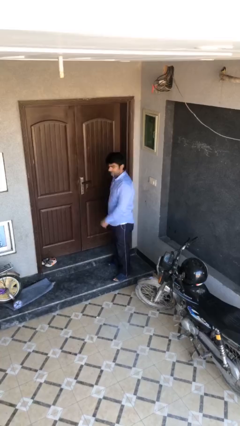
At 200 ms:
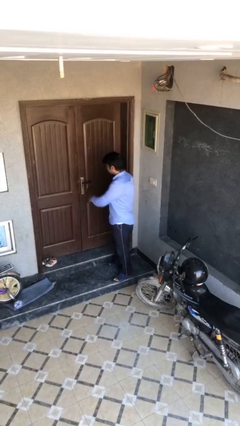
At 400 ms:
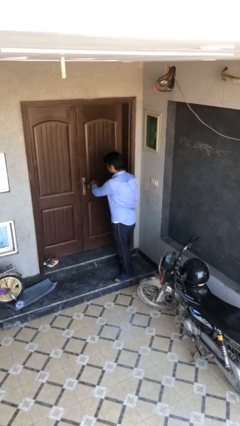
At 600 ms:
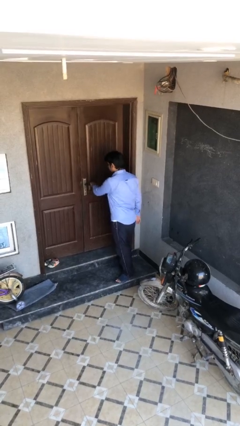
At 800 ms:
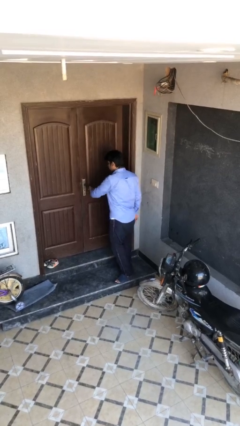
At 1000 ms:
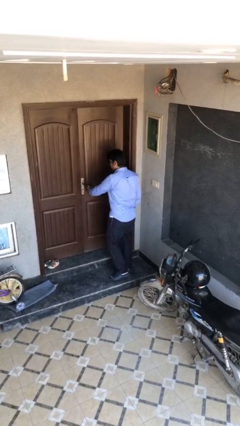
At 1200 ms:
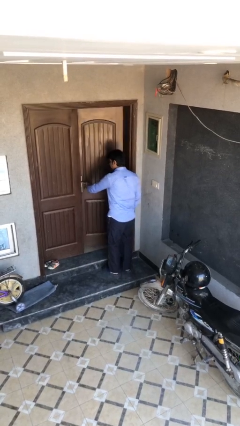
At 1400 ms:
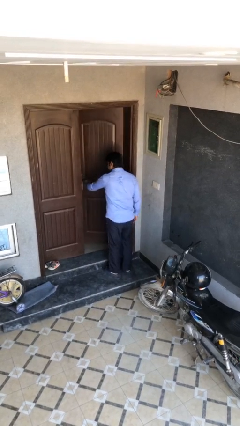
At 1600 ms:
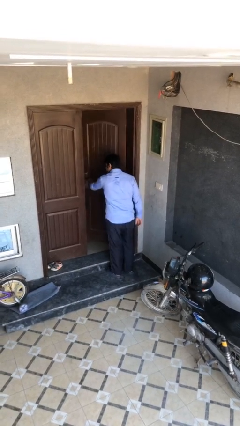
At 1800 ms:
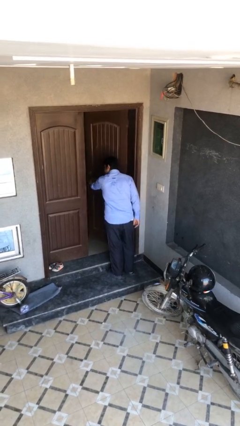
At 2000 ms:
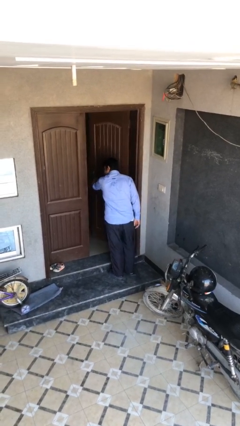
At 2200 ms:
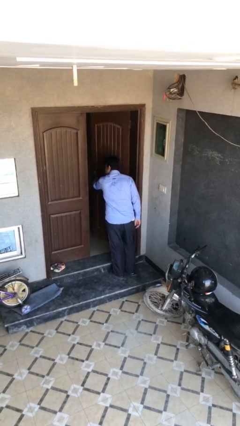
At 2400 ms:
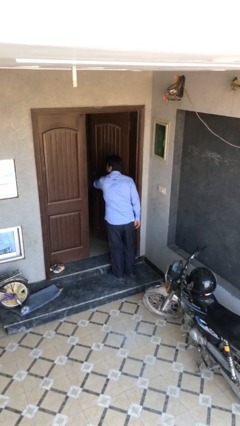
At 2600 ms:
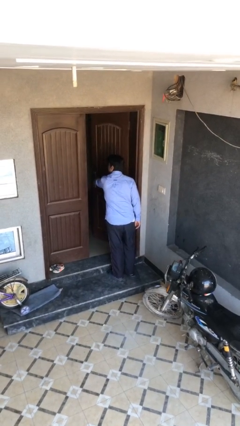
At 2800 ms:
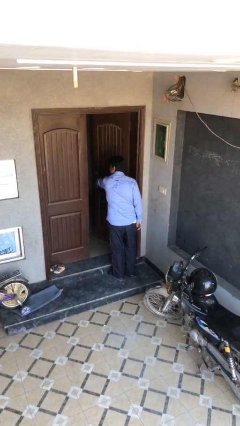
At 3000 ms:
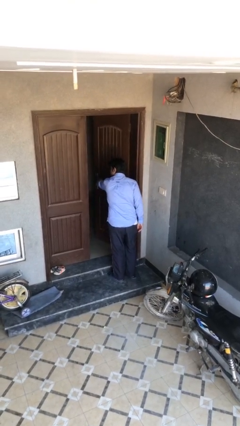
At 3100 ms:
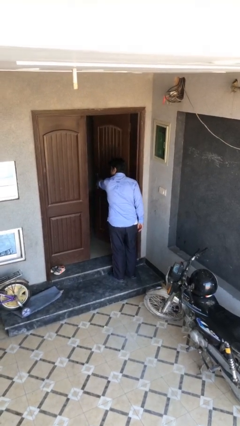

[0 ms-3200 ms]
person opens facility door

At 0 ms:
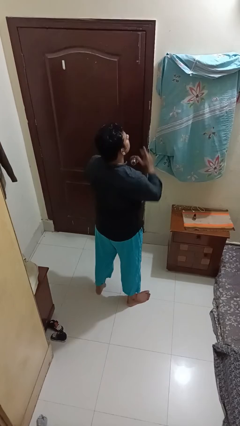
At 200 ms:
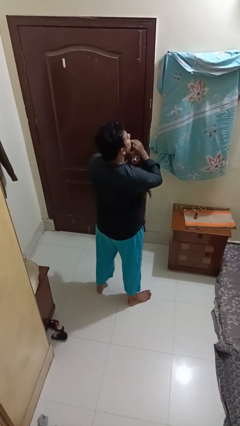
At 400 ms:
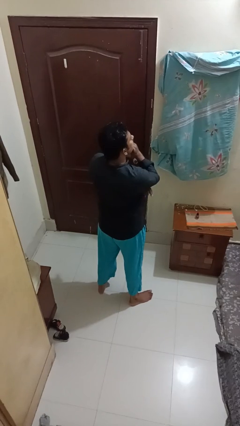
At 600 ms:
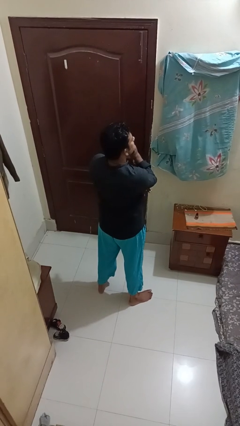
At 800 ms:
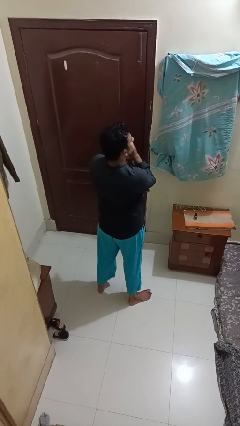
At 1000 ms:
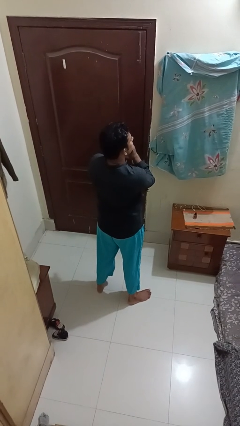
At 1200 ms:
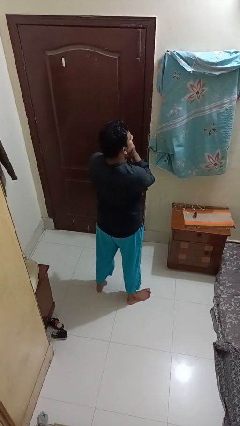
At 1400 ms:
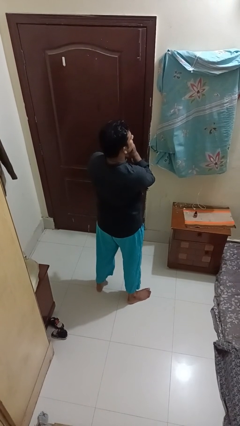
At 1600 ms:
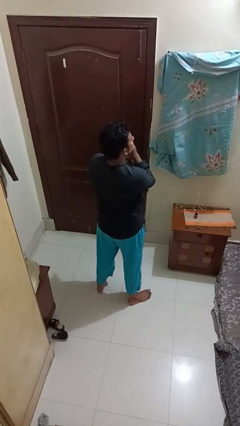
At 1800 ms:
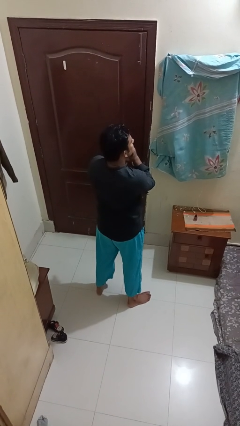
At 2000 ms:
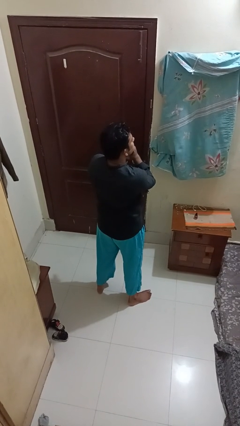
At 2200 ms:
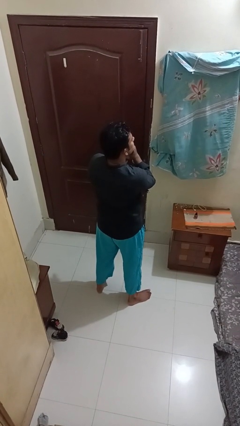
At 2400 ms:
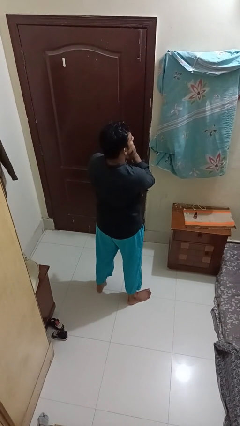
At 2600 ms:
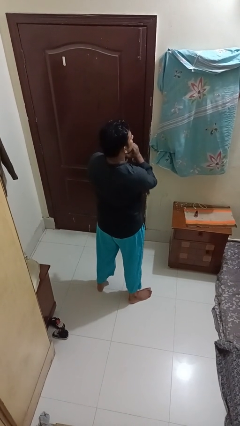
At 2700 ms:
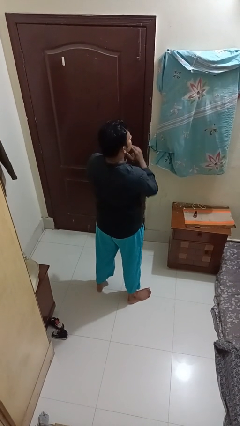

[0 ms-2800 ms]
person strokes chin

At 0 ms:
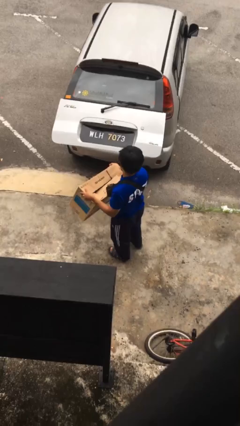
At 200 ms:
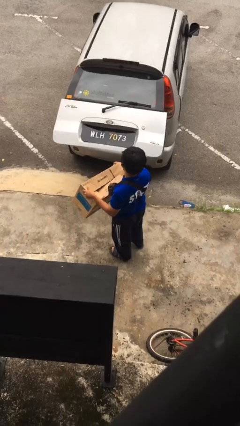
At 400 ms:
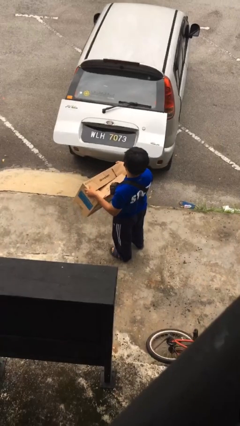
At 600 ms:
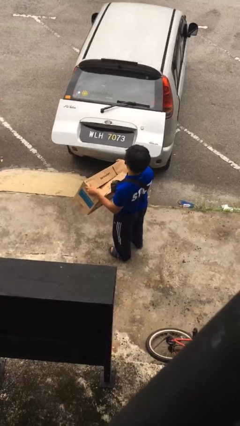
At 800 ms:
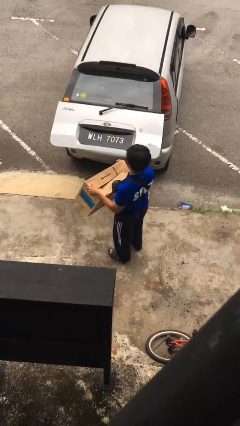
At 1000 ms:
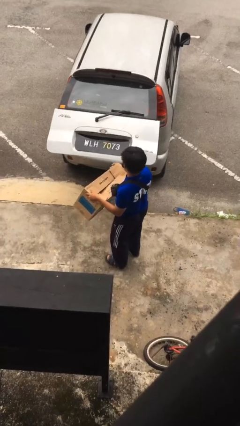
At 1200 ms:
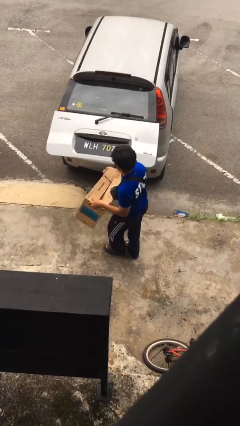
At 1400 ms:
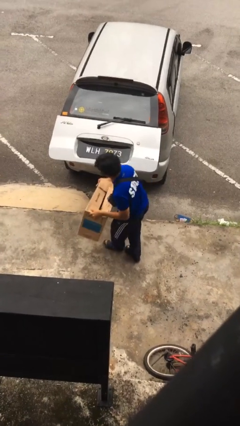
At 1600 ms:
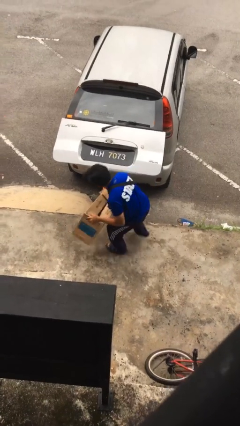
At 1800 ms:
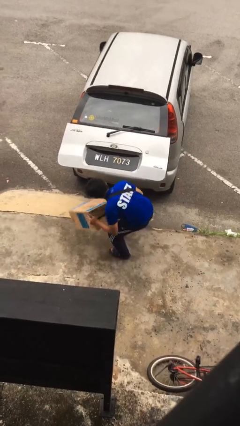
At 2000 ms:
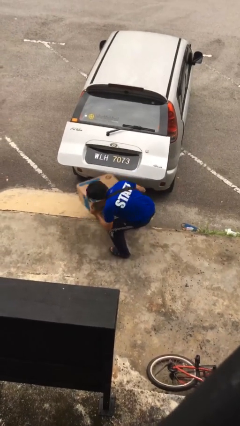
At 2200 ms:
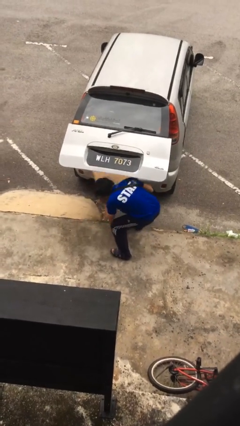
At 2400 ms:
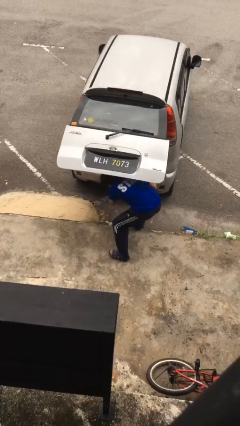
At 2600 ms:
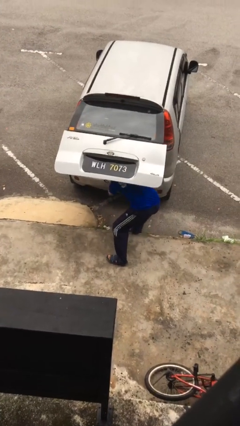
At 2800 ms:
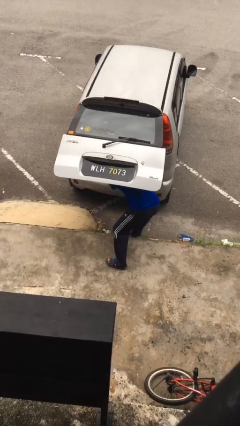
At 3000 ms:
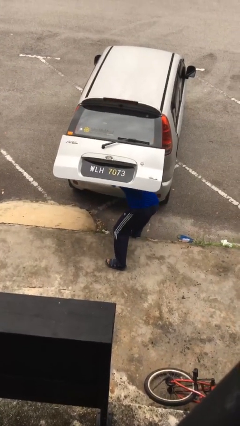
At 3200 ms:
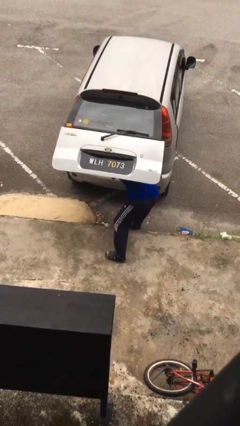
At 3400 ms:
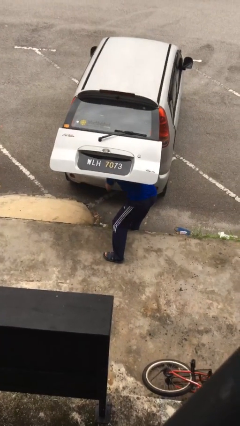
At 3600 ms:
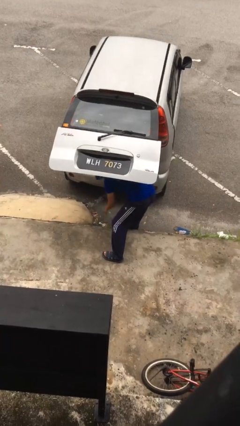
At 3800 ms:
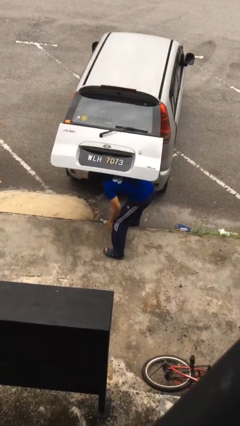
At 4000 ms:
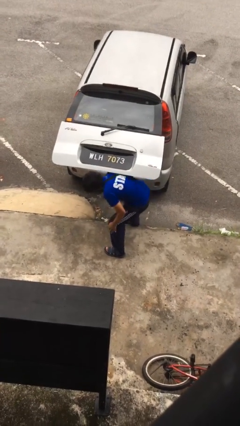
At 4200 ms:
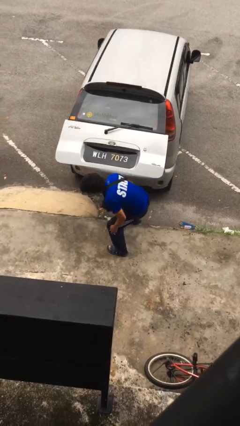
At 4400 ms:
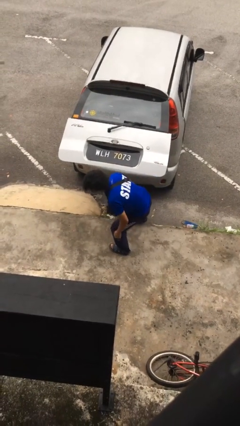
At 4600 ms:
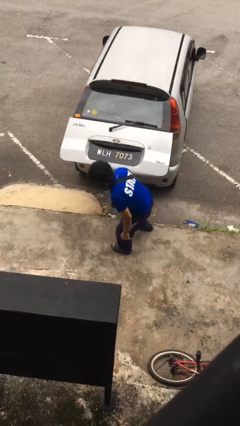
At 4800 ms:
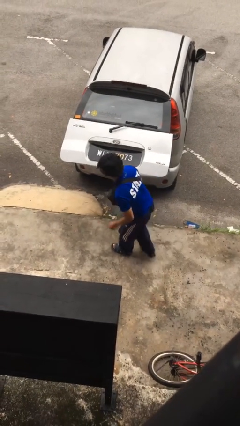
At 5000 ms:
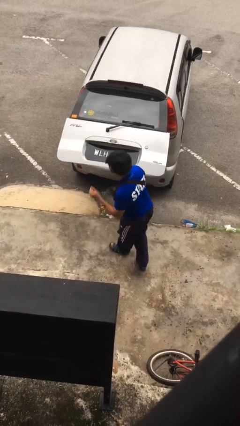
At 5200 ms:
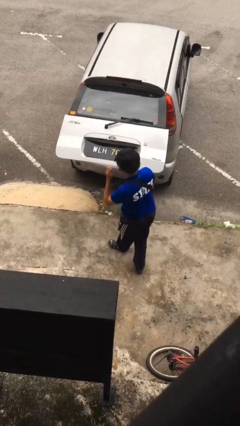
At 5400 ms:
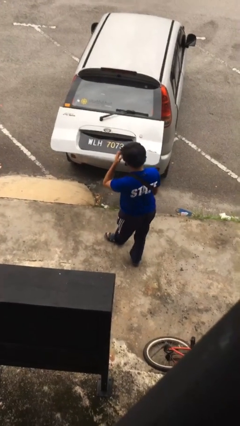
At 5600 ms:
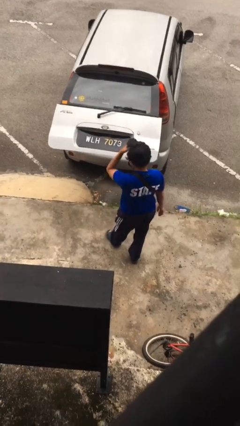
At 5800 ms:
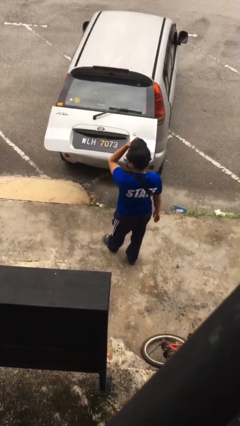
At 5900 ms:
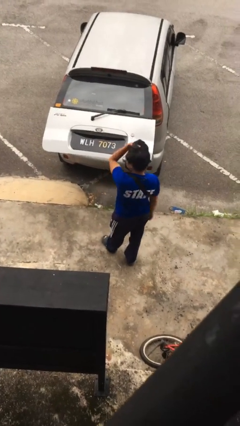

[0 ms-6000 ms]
person loads car

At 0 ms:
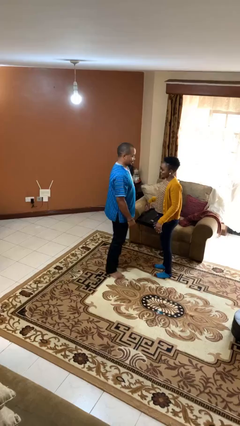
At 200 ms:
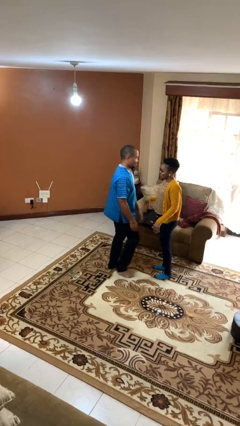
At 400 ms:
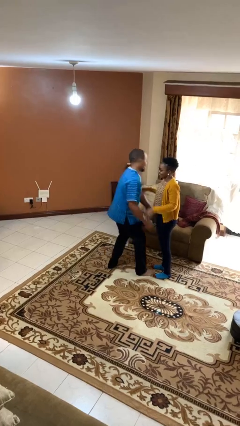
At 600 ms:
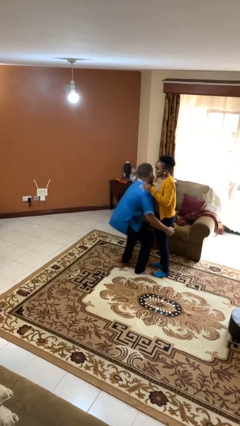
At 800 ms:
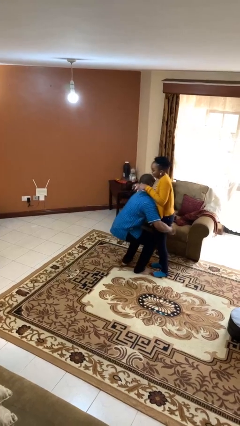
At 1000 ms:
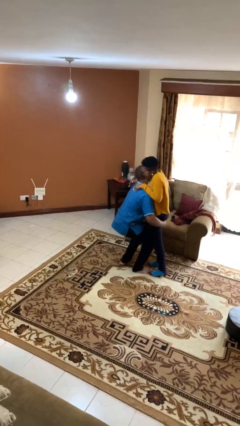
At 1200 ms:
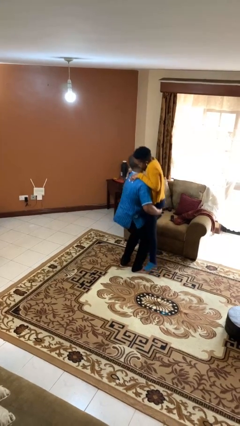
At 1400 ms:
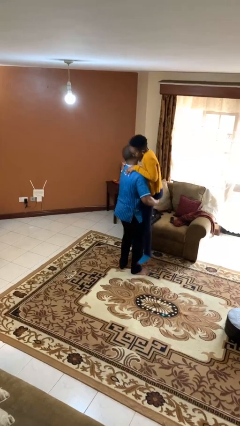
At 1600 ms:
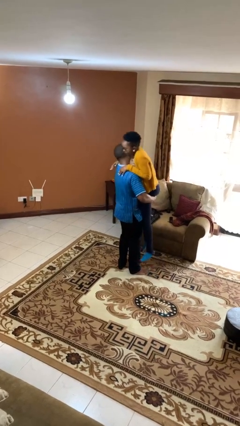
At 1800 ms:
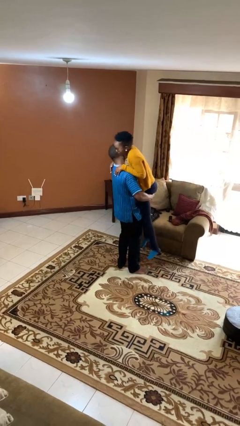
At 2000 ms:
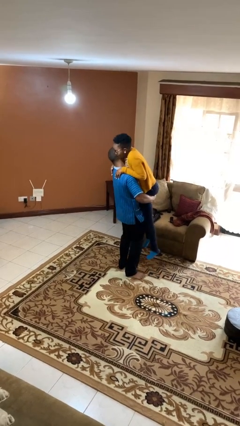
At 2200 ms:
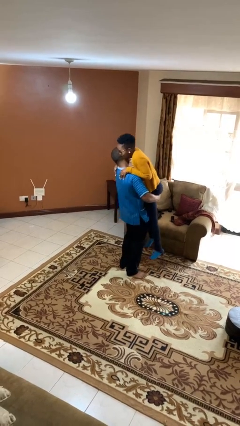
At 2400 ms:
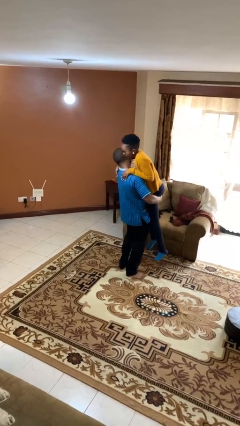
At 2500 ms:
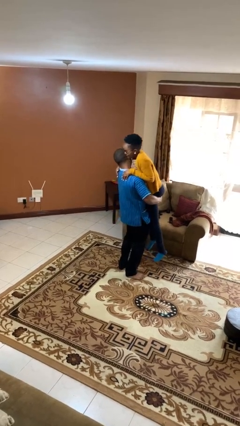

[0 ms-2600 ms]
person picks up person

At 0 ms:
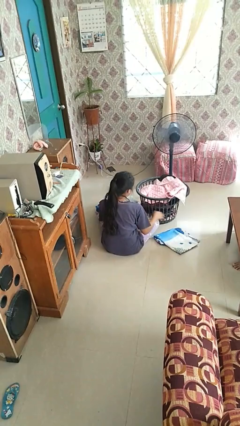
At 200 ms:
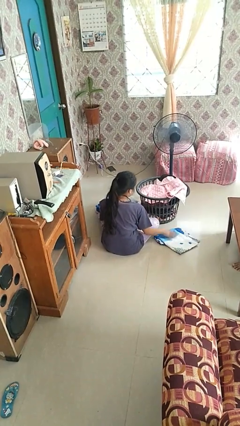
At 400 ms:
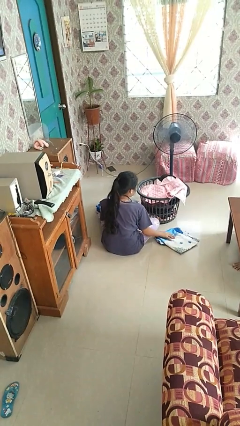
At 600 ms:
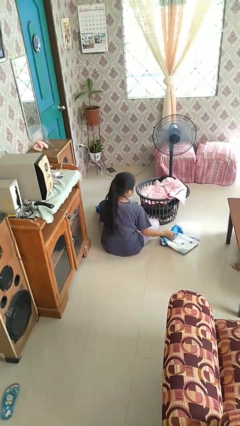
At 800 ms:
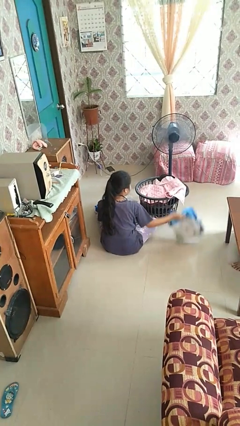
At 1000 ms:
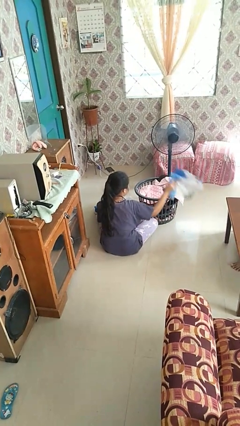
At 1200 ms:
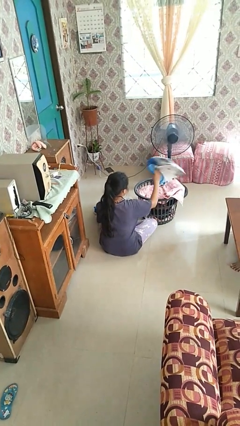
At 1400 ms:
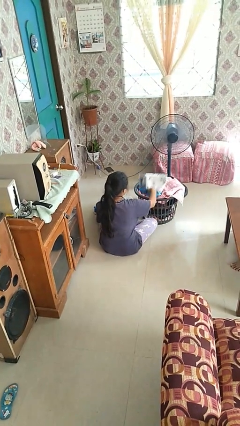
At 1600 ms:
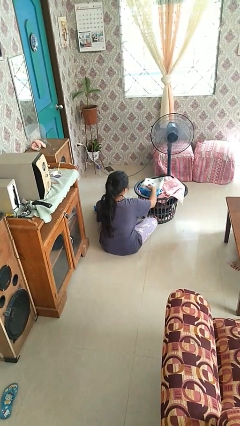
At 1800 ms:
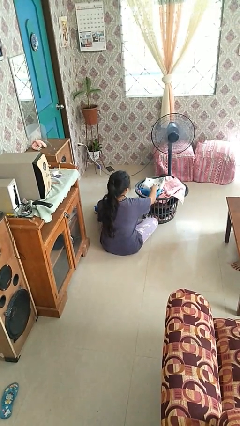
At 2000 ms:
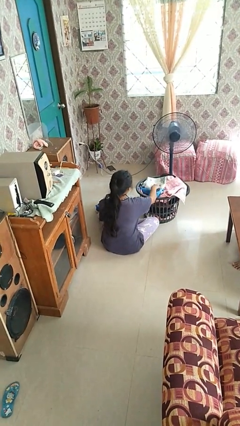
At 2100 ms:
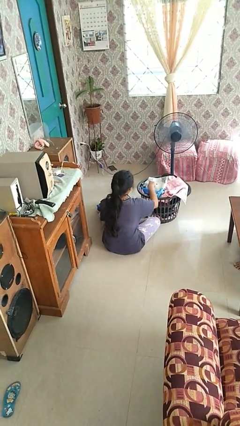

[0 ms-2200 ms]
person puts object into basket

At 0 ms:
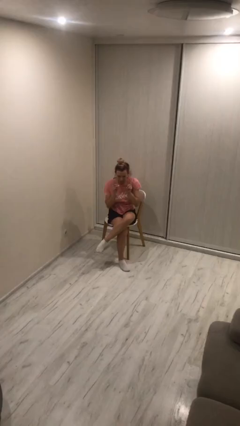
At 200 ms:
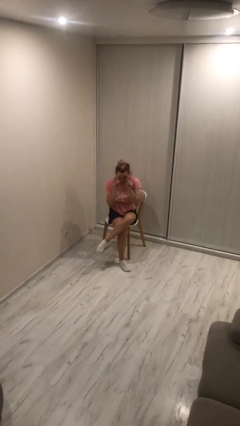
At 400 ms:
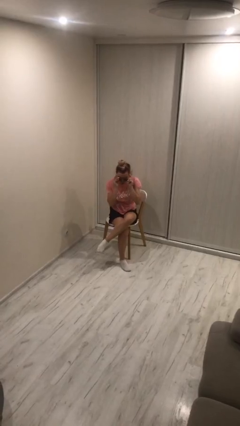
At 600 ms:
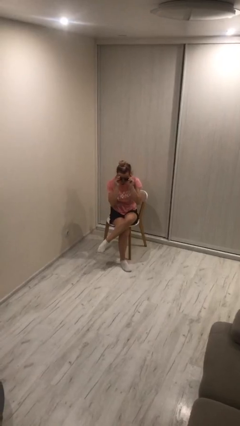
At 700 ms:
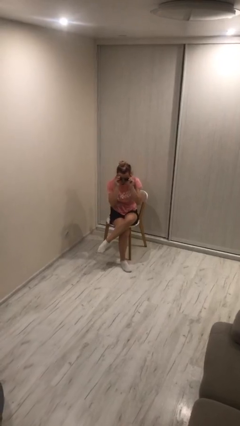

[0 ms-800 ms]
person puts on sunglasses
